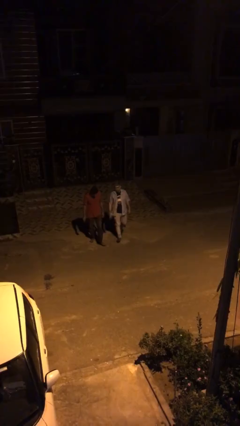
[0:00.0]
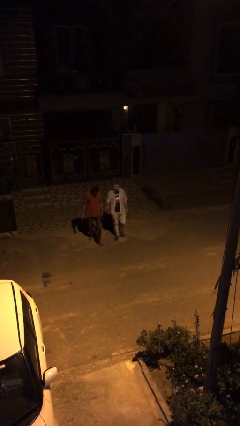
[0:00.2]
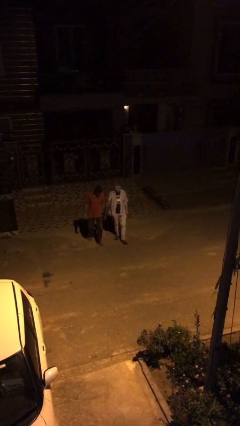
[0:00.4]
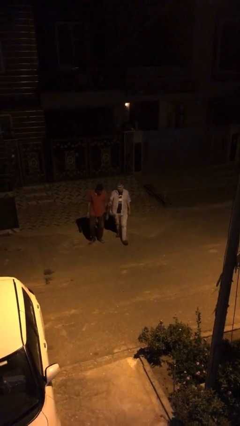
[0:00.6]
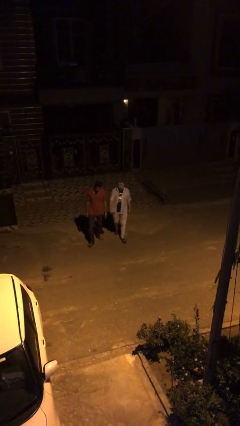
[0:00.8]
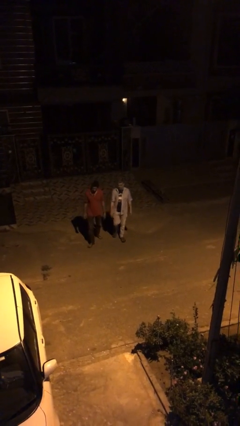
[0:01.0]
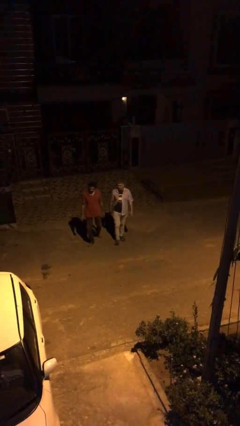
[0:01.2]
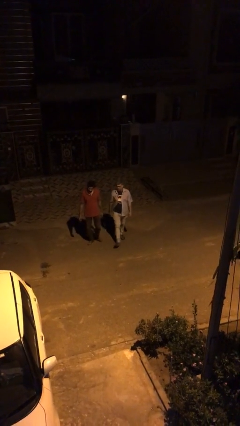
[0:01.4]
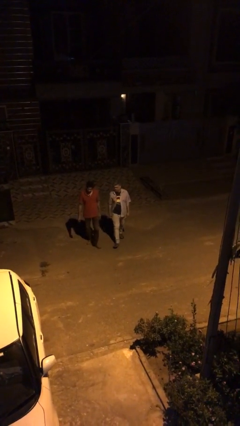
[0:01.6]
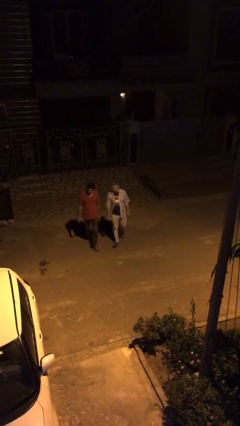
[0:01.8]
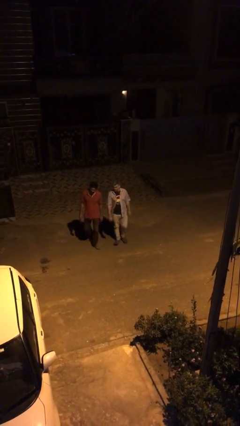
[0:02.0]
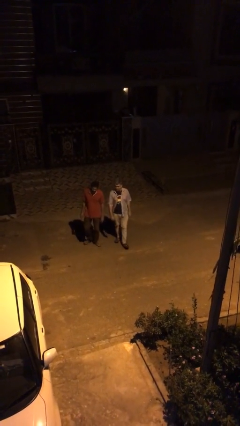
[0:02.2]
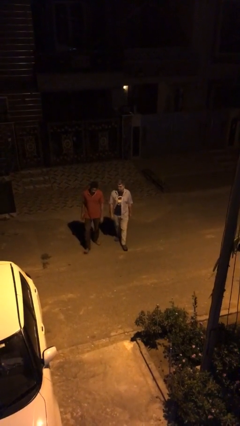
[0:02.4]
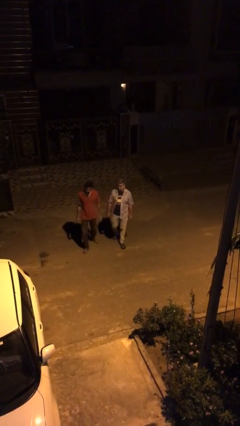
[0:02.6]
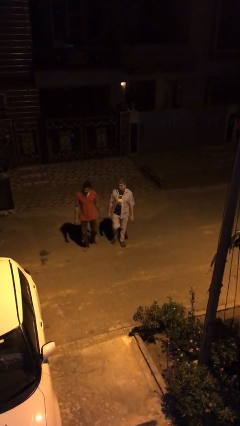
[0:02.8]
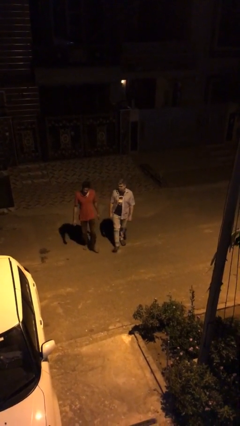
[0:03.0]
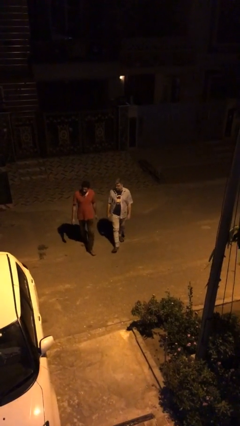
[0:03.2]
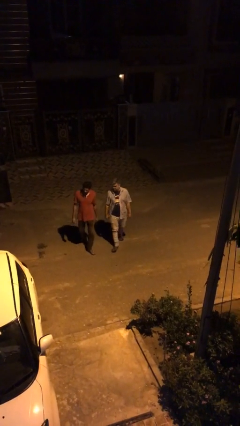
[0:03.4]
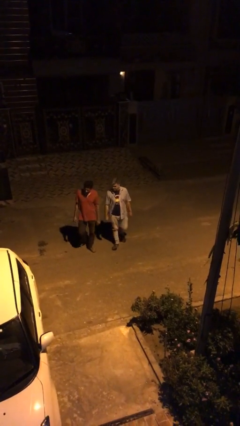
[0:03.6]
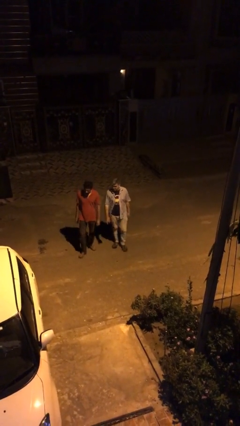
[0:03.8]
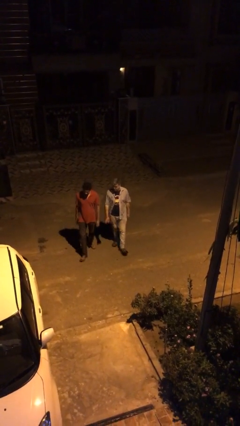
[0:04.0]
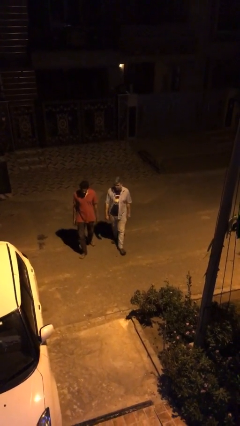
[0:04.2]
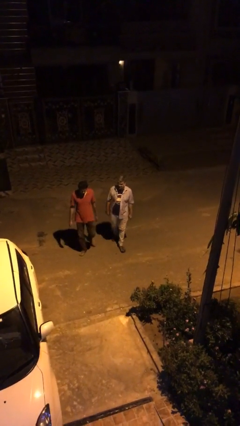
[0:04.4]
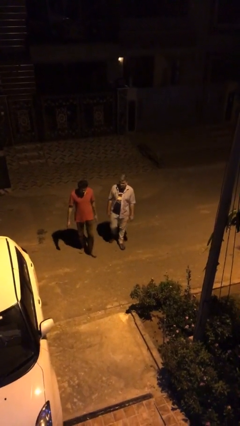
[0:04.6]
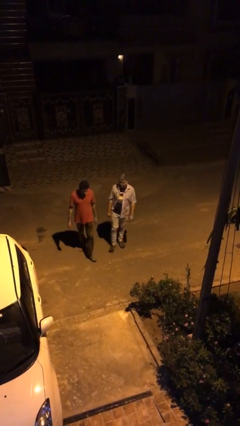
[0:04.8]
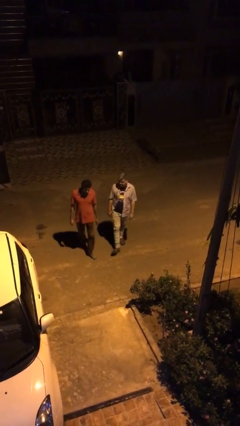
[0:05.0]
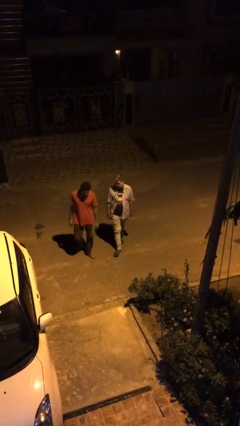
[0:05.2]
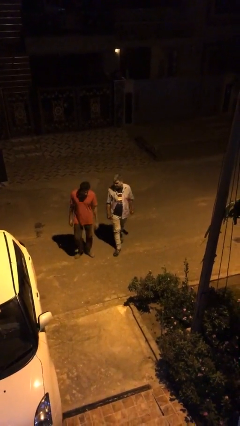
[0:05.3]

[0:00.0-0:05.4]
person talks to person

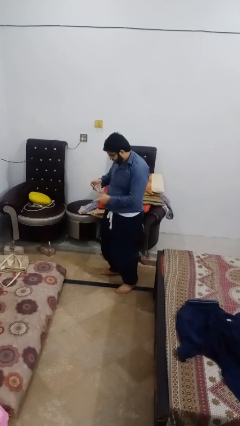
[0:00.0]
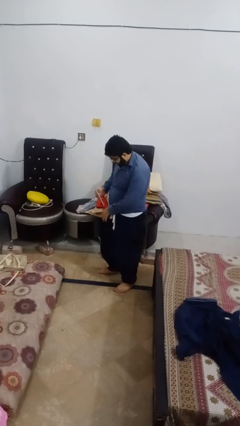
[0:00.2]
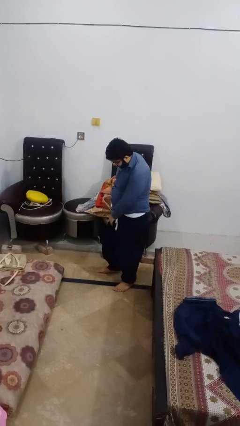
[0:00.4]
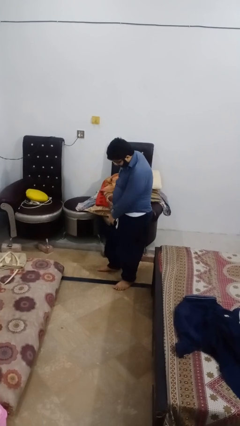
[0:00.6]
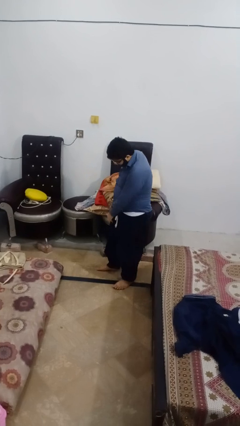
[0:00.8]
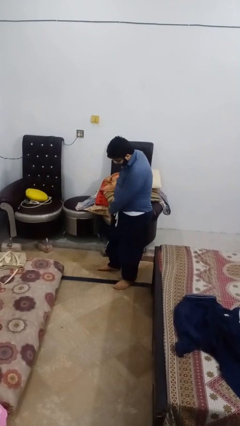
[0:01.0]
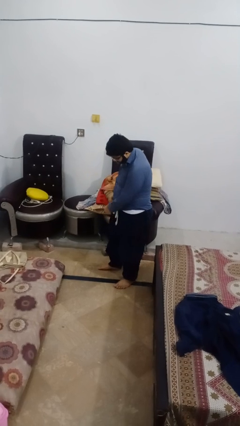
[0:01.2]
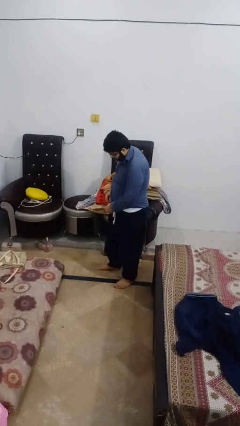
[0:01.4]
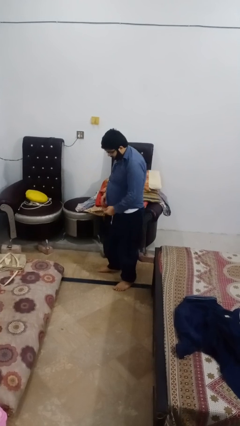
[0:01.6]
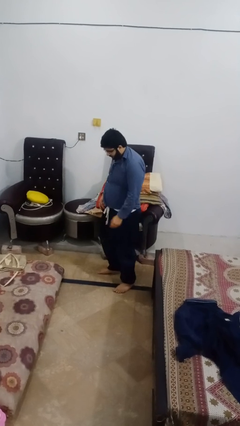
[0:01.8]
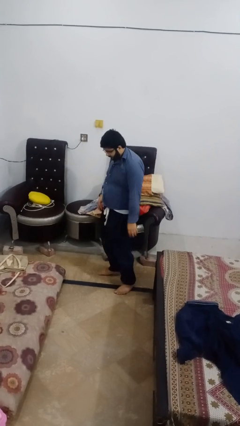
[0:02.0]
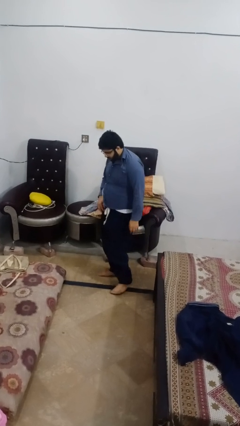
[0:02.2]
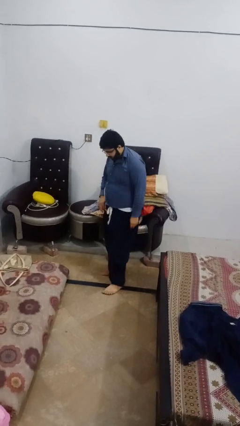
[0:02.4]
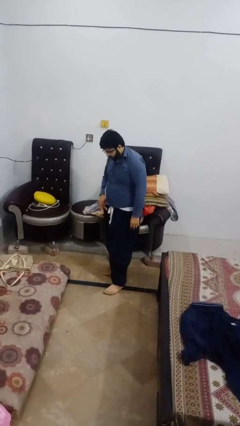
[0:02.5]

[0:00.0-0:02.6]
person puts phone into pocket

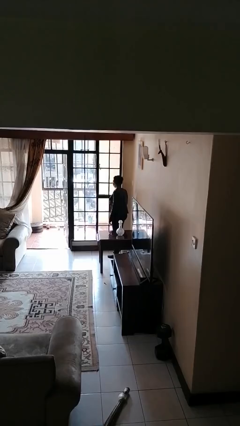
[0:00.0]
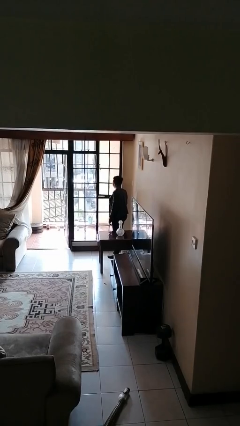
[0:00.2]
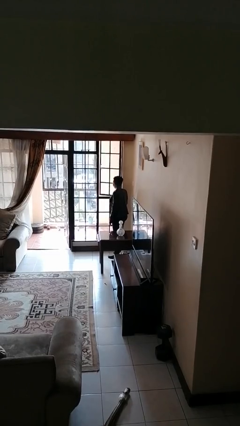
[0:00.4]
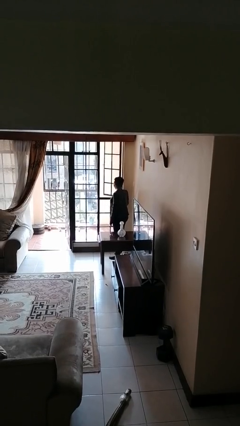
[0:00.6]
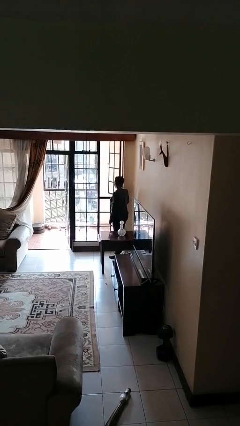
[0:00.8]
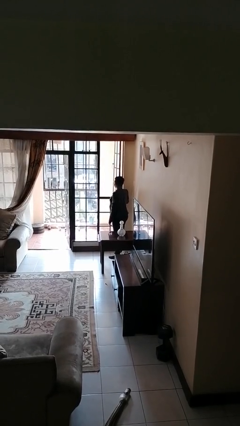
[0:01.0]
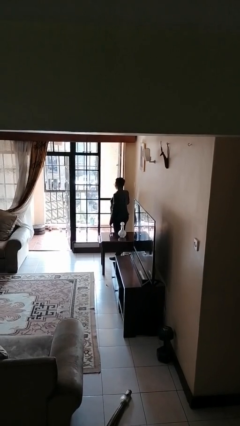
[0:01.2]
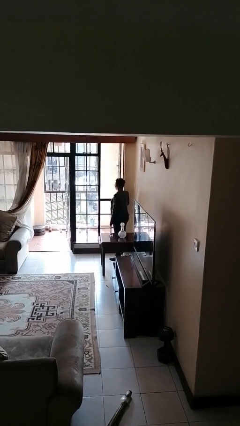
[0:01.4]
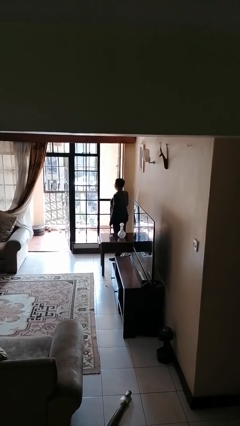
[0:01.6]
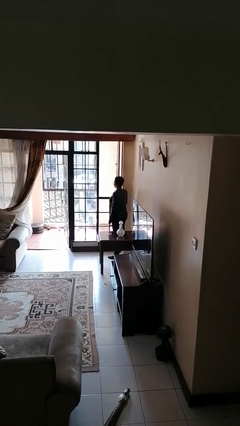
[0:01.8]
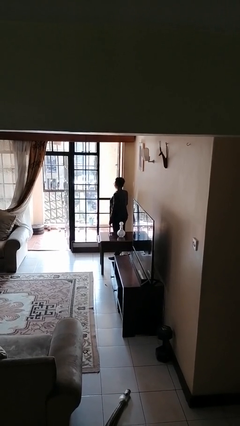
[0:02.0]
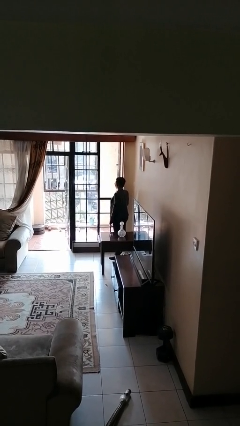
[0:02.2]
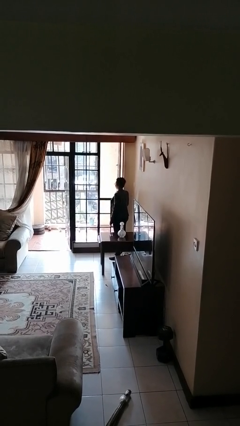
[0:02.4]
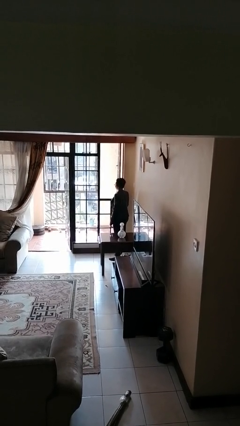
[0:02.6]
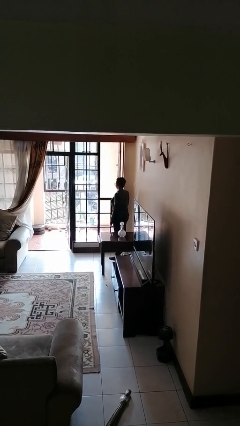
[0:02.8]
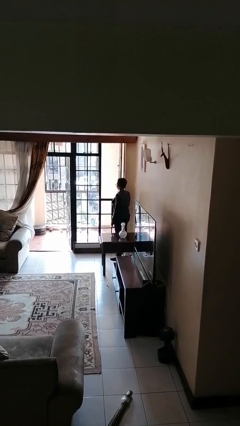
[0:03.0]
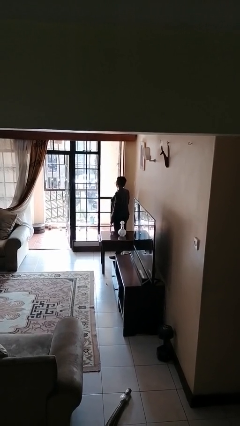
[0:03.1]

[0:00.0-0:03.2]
person opens home window

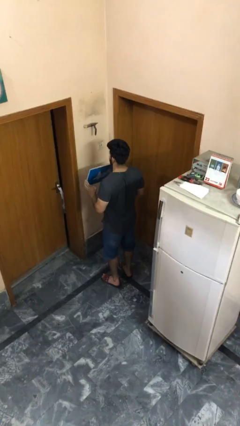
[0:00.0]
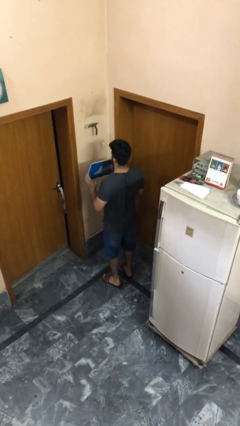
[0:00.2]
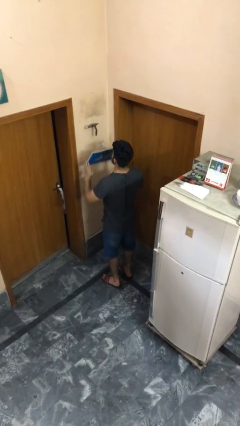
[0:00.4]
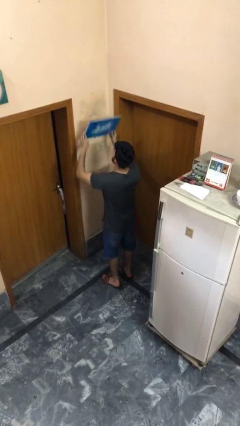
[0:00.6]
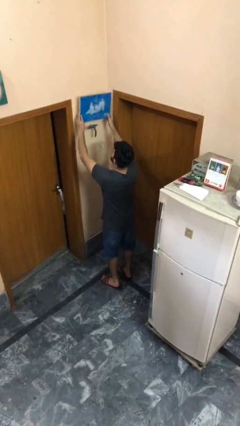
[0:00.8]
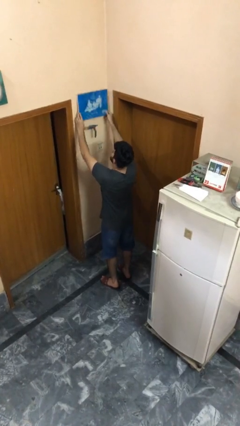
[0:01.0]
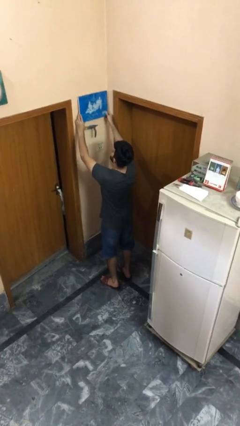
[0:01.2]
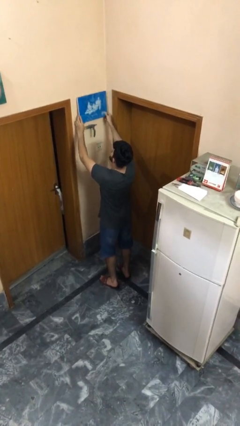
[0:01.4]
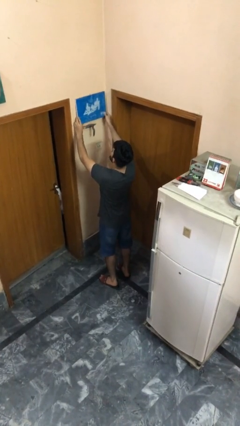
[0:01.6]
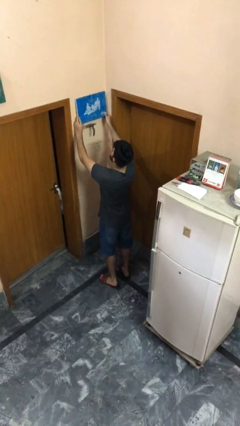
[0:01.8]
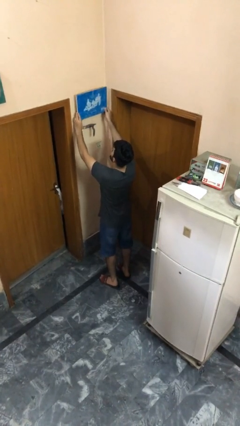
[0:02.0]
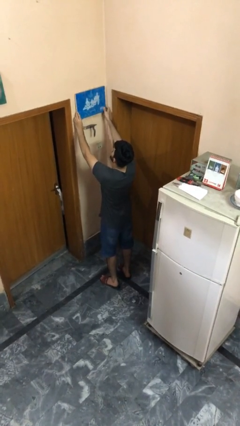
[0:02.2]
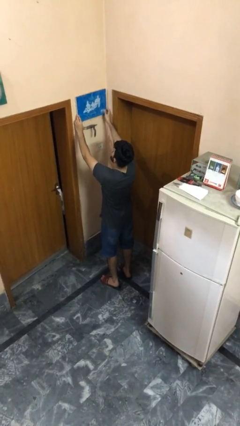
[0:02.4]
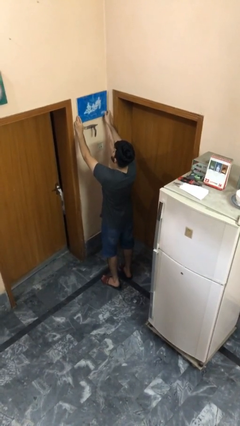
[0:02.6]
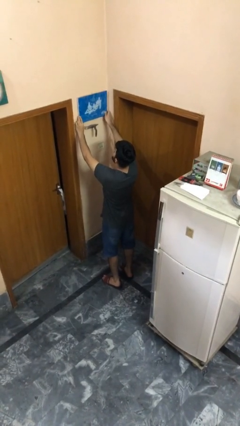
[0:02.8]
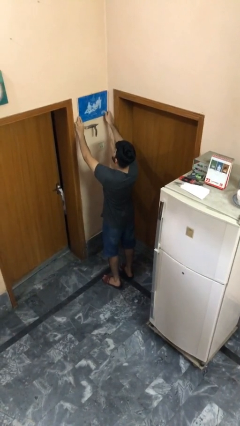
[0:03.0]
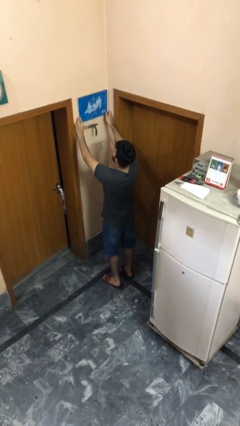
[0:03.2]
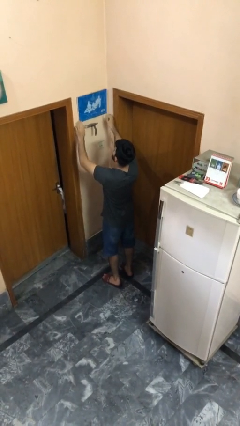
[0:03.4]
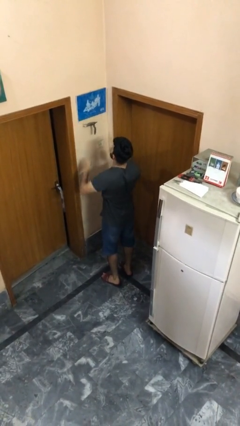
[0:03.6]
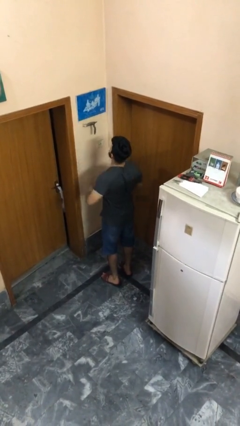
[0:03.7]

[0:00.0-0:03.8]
person puts up picture frame

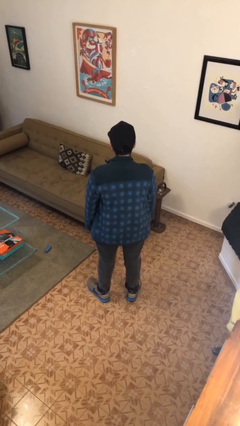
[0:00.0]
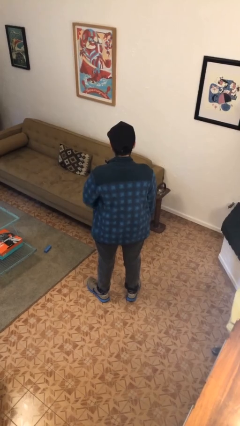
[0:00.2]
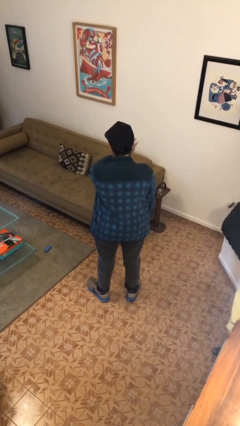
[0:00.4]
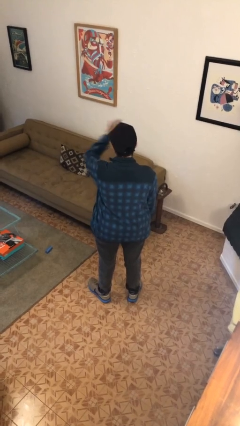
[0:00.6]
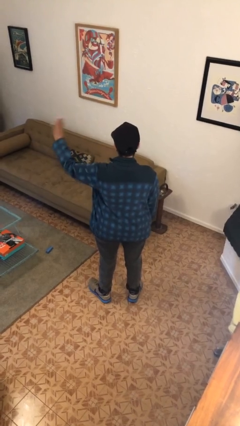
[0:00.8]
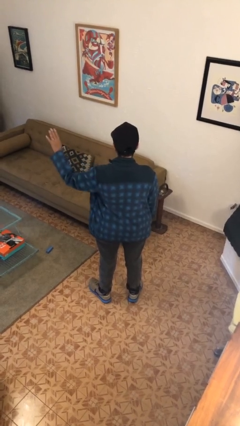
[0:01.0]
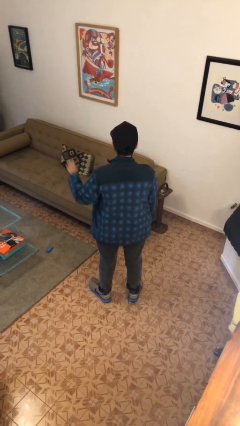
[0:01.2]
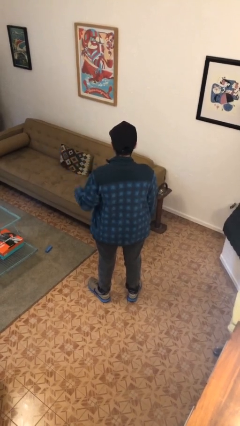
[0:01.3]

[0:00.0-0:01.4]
person gestures swipe left

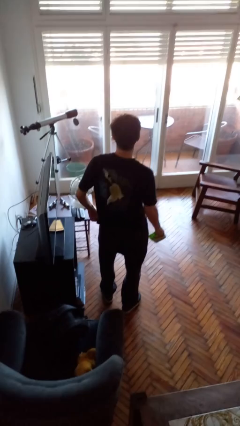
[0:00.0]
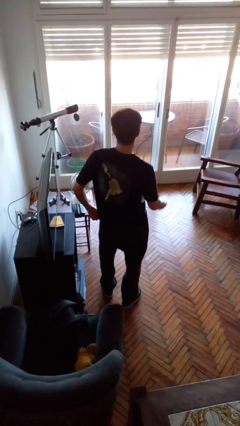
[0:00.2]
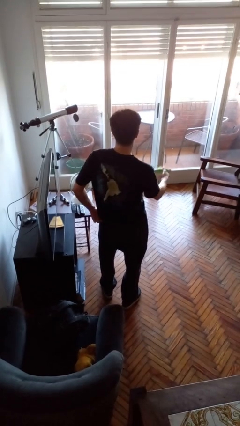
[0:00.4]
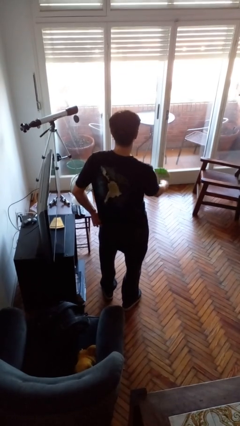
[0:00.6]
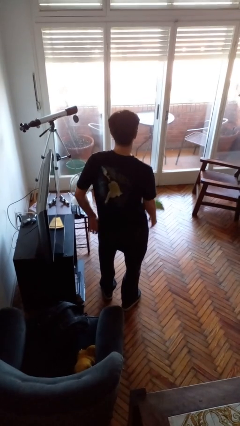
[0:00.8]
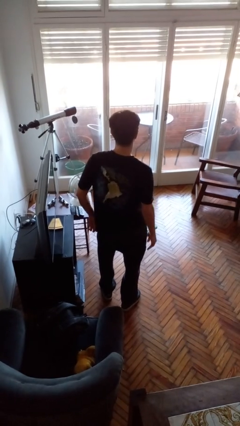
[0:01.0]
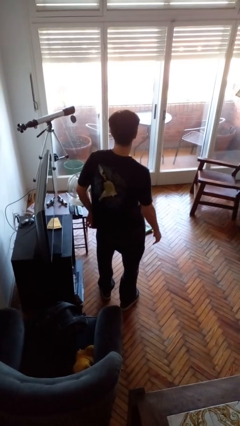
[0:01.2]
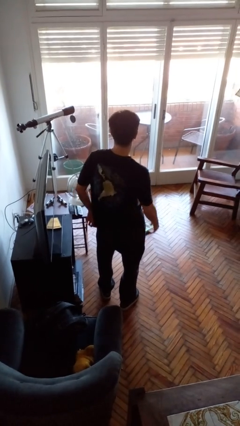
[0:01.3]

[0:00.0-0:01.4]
person throws object to ground
